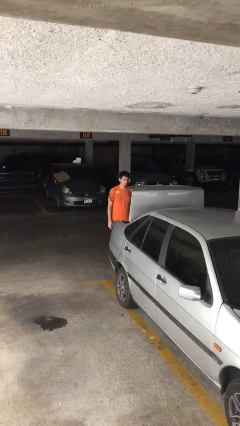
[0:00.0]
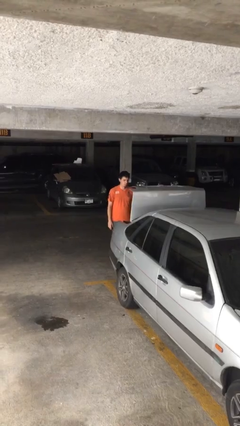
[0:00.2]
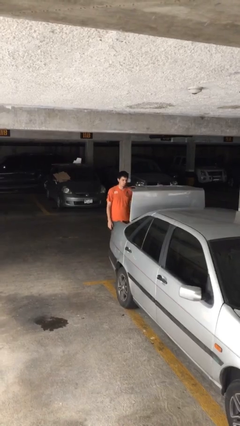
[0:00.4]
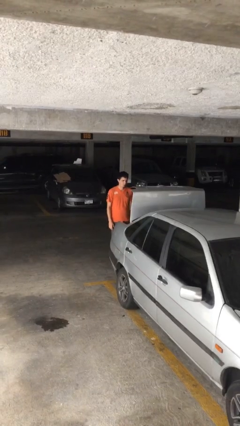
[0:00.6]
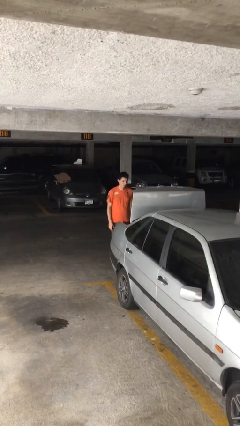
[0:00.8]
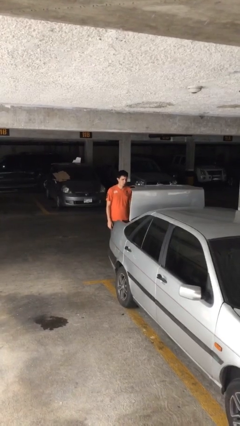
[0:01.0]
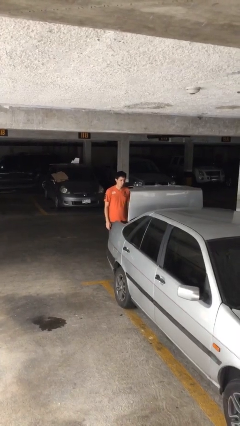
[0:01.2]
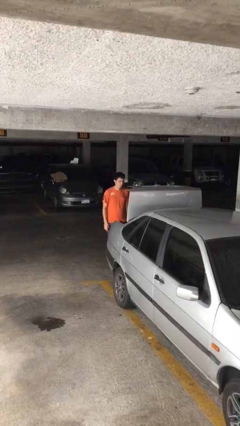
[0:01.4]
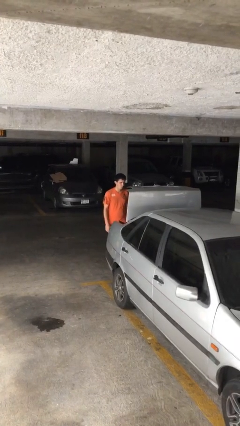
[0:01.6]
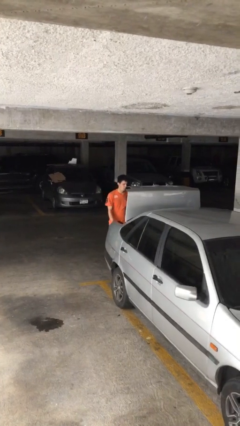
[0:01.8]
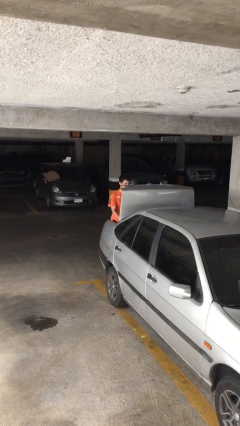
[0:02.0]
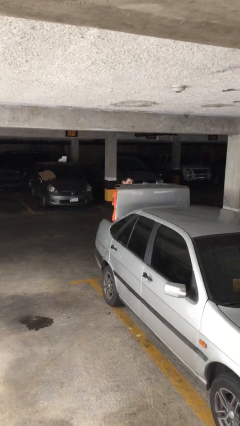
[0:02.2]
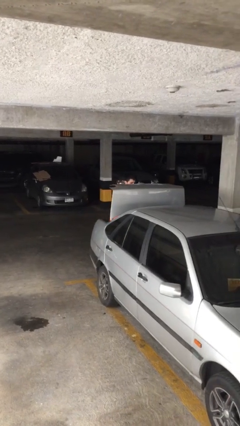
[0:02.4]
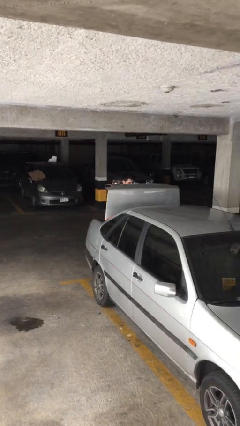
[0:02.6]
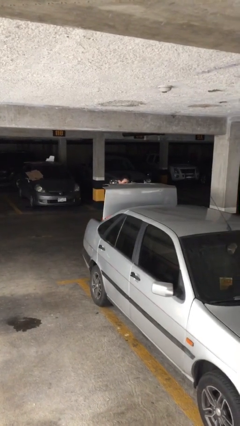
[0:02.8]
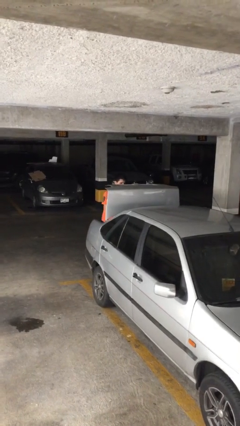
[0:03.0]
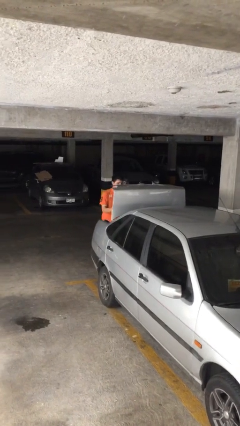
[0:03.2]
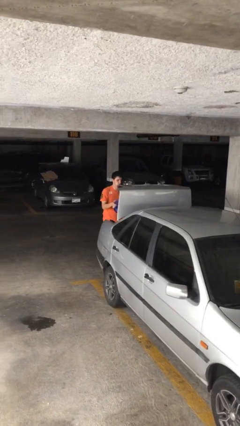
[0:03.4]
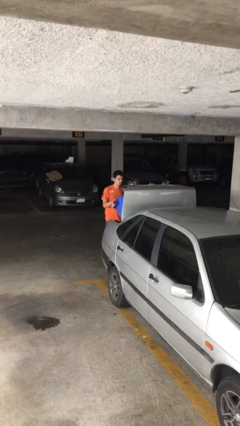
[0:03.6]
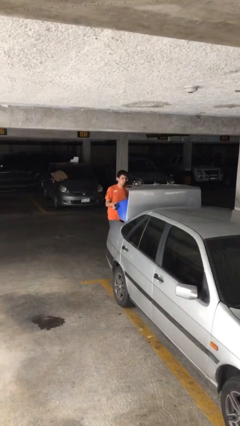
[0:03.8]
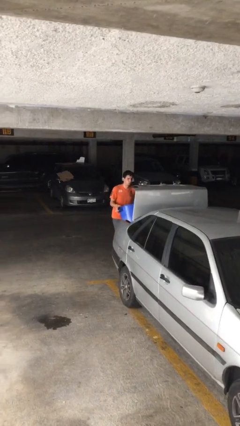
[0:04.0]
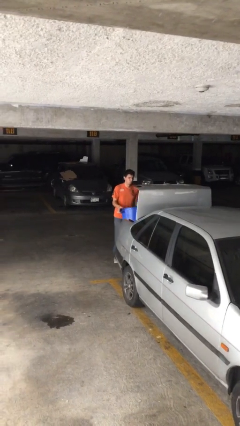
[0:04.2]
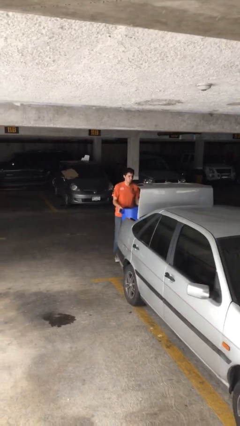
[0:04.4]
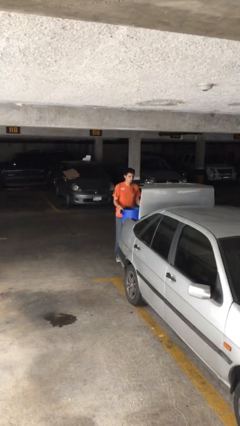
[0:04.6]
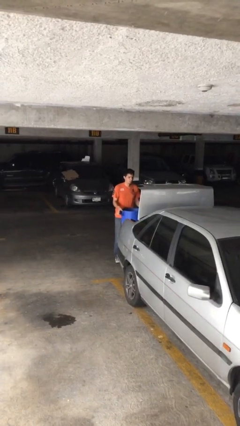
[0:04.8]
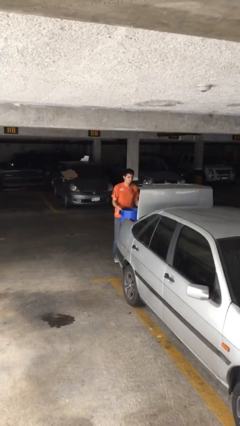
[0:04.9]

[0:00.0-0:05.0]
person unloads car

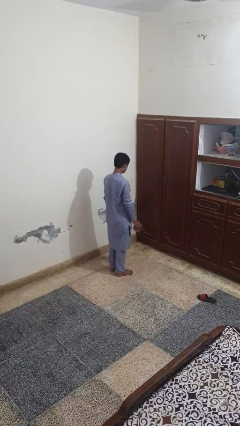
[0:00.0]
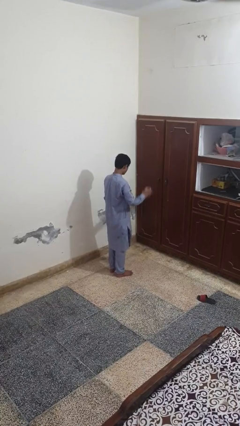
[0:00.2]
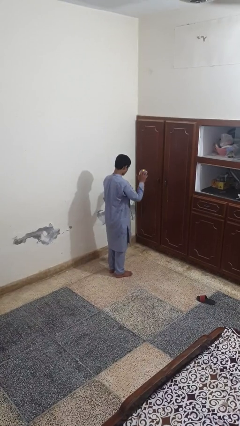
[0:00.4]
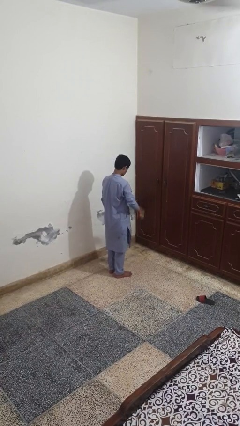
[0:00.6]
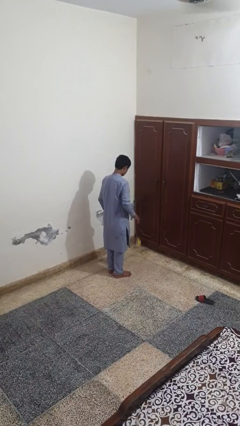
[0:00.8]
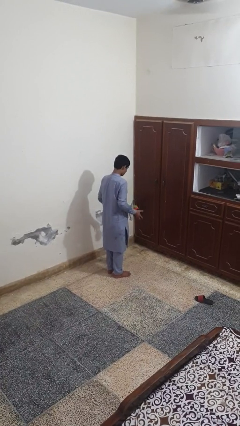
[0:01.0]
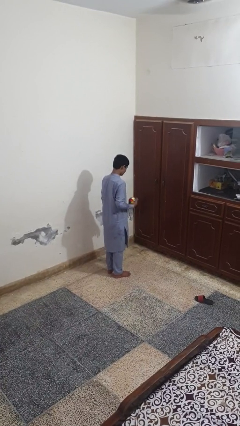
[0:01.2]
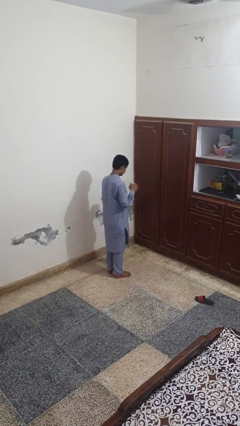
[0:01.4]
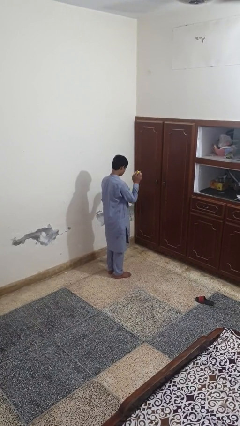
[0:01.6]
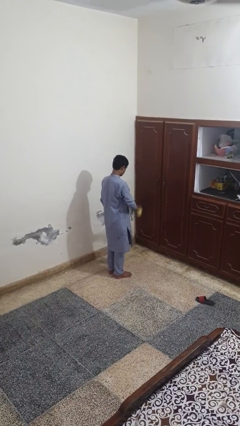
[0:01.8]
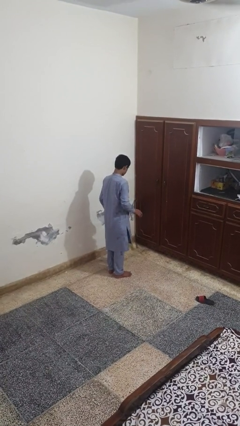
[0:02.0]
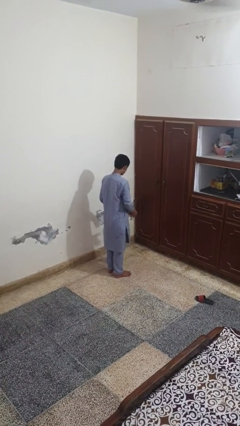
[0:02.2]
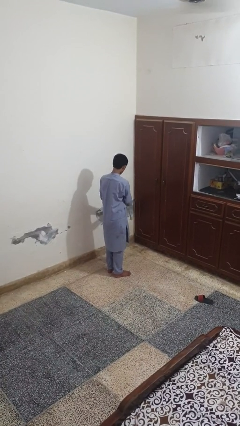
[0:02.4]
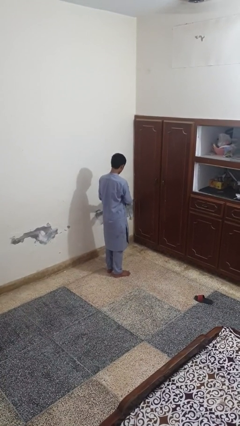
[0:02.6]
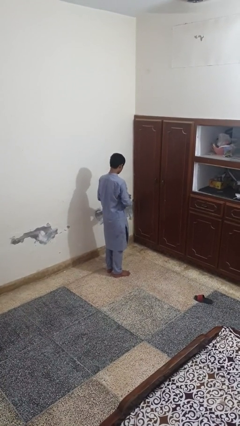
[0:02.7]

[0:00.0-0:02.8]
person bounces ball on floor

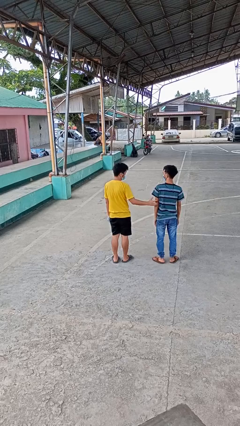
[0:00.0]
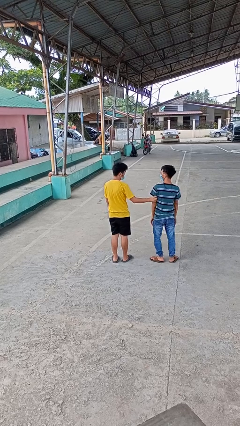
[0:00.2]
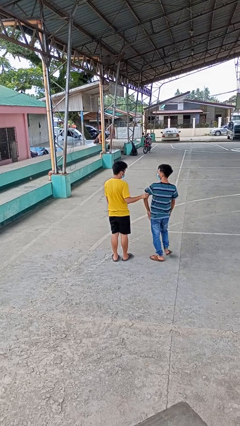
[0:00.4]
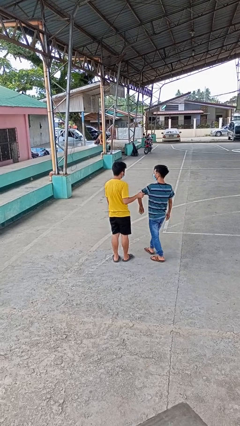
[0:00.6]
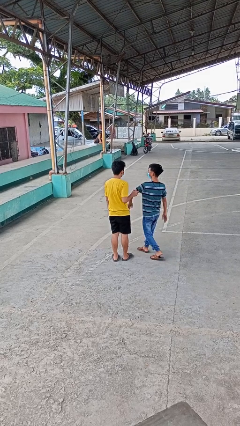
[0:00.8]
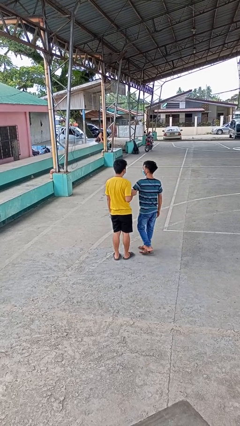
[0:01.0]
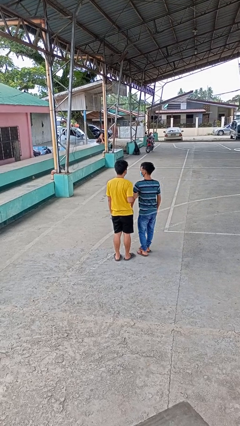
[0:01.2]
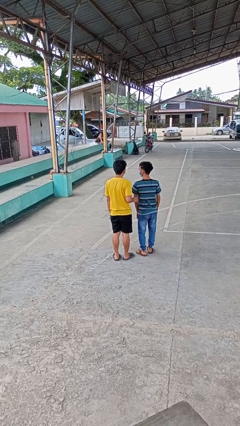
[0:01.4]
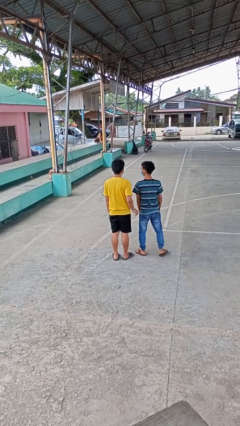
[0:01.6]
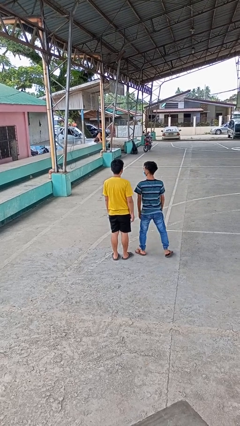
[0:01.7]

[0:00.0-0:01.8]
person grabs person by bicep

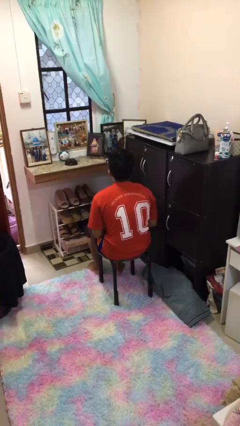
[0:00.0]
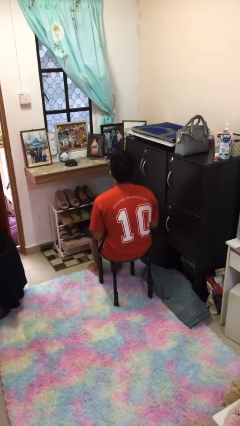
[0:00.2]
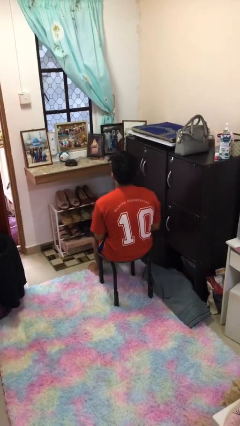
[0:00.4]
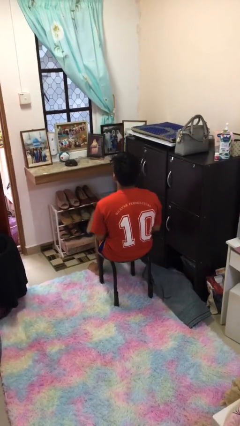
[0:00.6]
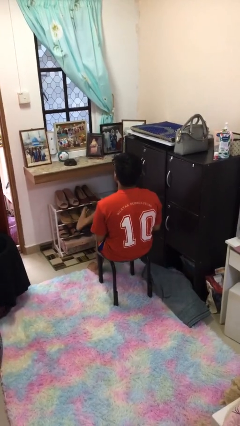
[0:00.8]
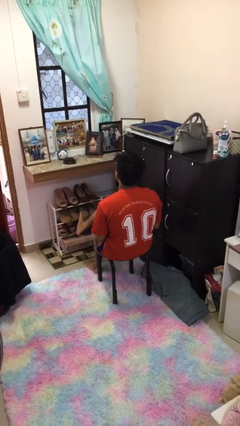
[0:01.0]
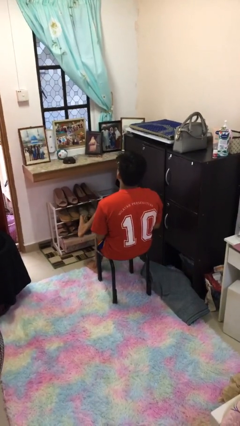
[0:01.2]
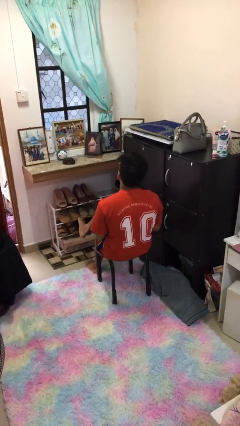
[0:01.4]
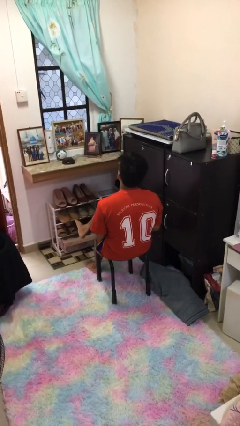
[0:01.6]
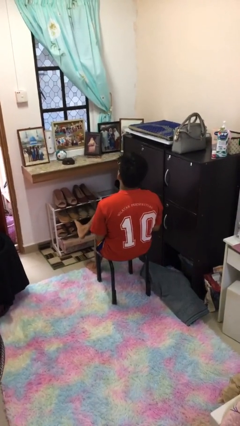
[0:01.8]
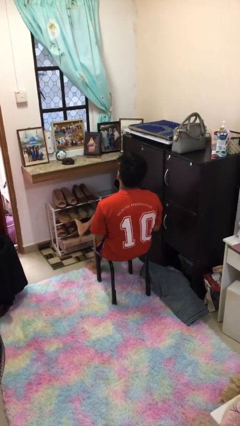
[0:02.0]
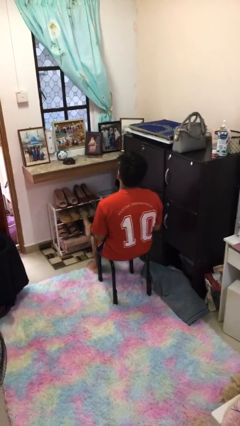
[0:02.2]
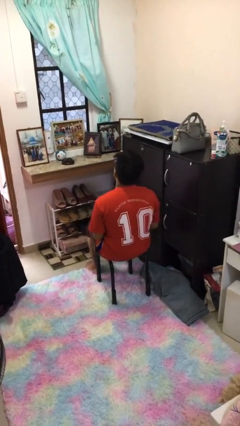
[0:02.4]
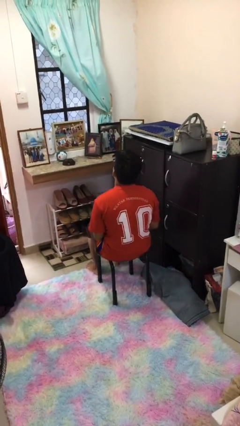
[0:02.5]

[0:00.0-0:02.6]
person crosses legs

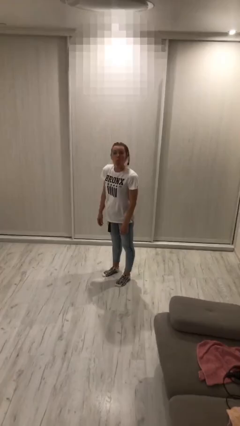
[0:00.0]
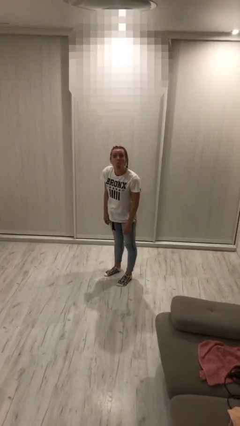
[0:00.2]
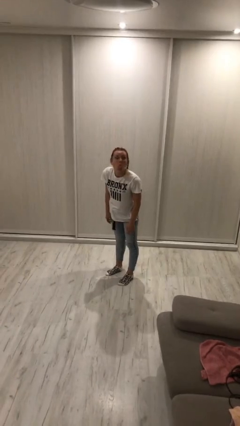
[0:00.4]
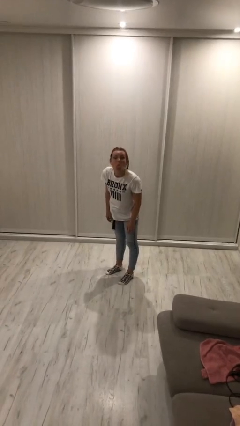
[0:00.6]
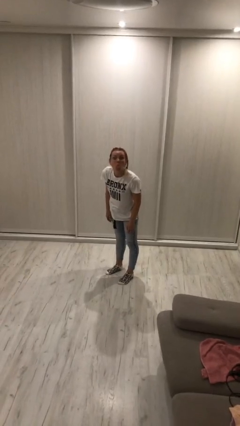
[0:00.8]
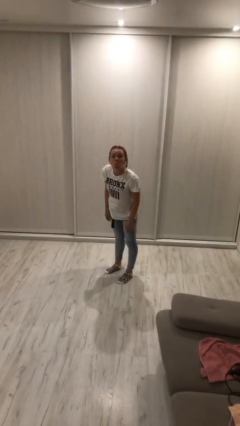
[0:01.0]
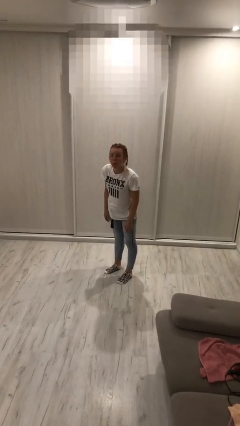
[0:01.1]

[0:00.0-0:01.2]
person sticks out tongue

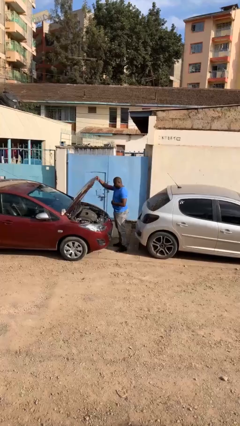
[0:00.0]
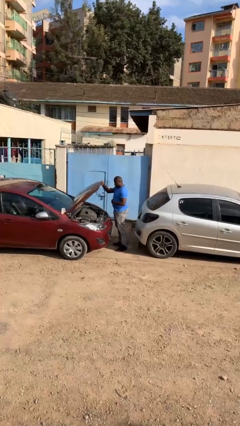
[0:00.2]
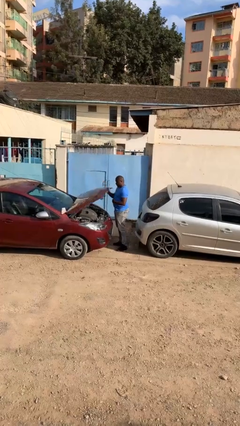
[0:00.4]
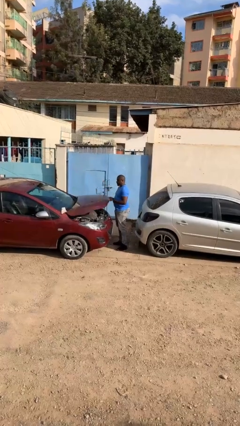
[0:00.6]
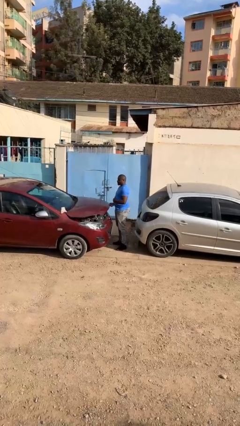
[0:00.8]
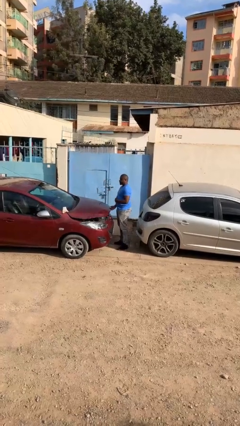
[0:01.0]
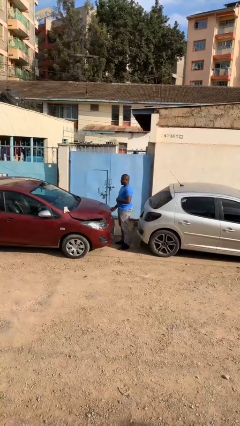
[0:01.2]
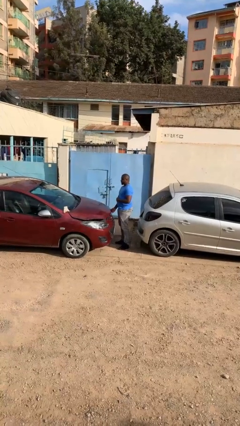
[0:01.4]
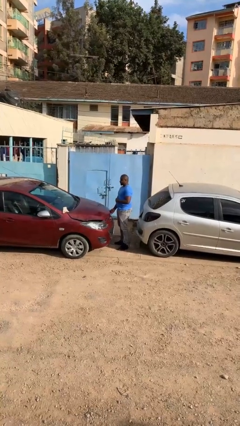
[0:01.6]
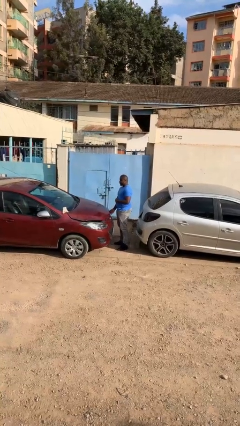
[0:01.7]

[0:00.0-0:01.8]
person closes car hood

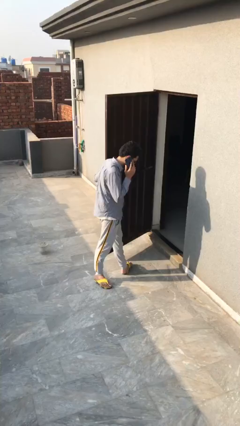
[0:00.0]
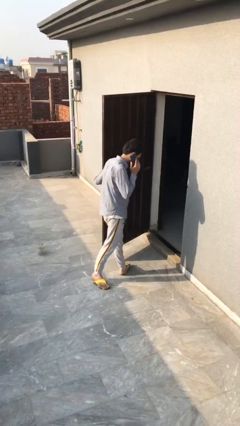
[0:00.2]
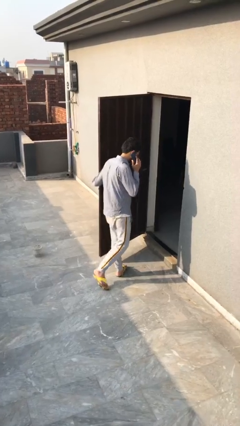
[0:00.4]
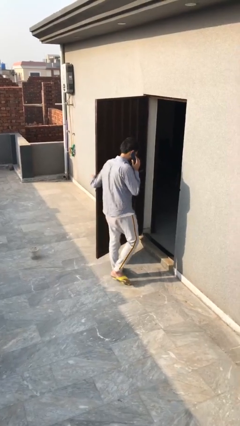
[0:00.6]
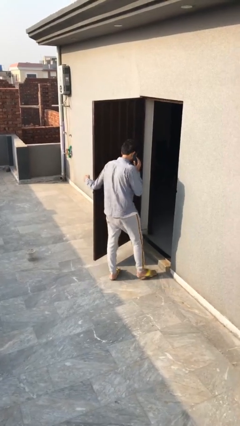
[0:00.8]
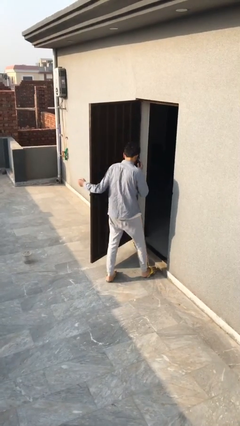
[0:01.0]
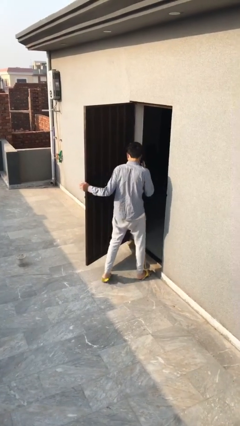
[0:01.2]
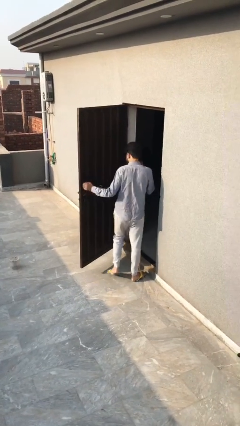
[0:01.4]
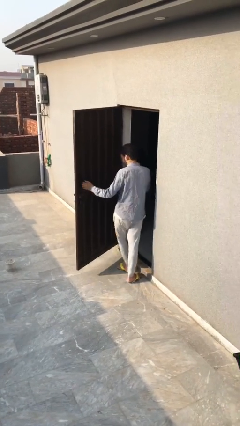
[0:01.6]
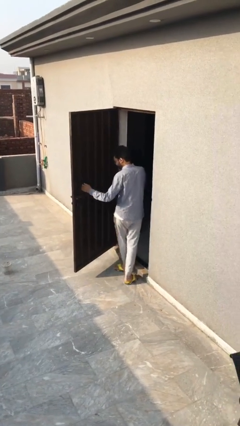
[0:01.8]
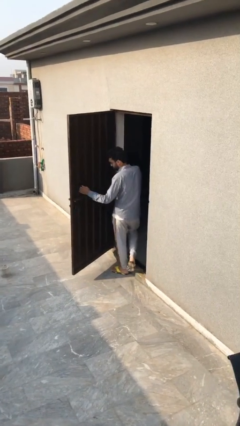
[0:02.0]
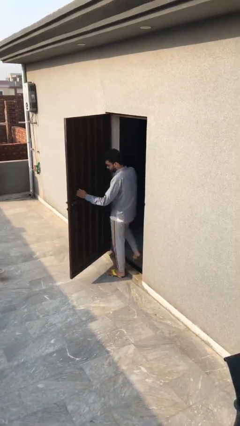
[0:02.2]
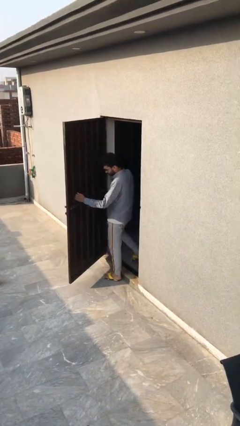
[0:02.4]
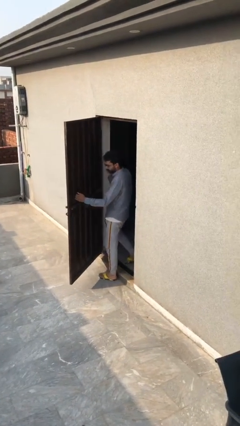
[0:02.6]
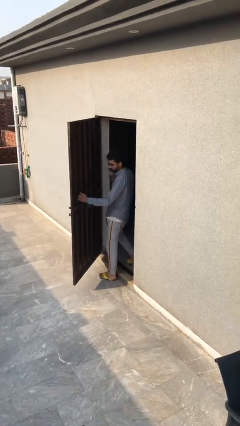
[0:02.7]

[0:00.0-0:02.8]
person exits scene through structure
